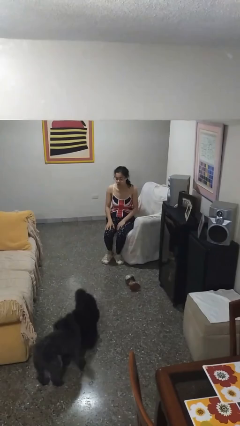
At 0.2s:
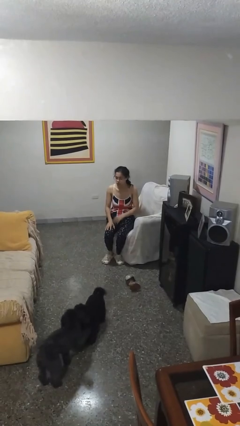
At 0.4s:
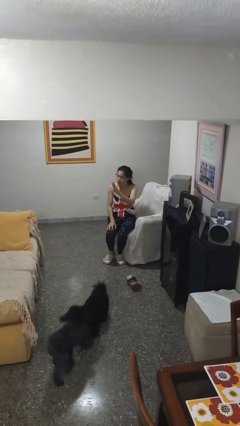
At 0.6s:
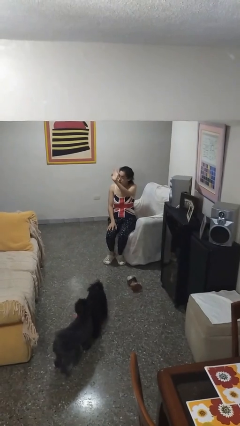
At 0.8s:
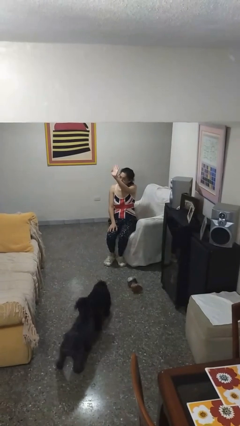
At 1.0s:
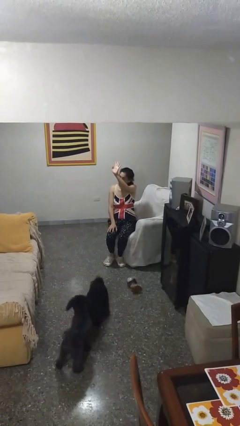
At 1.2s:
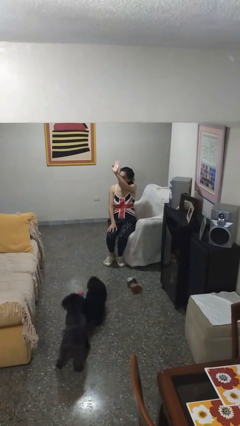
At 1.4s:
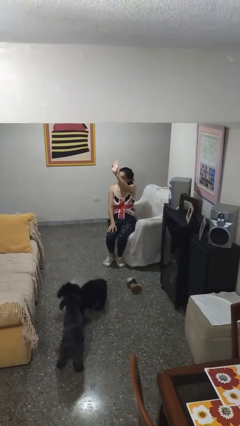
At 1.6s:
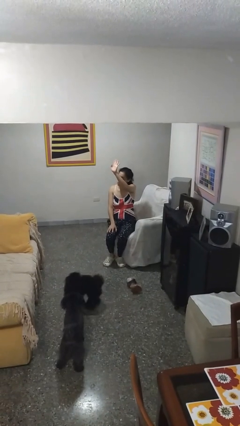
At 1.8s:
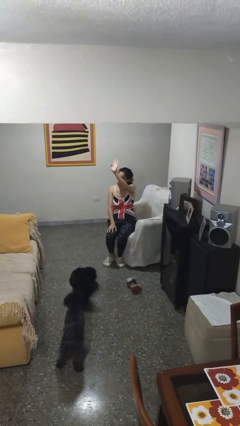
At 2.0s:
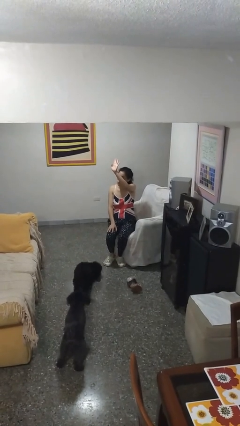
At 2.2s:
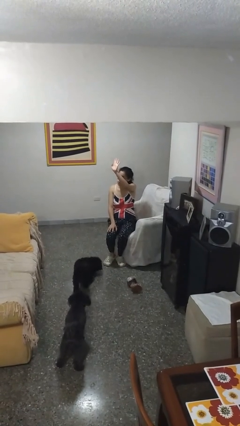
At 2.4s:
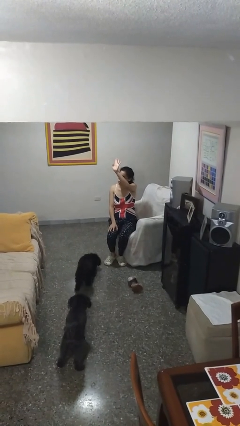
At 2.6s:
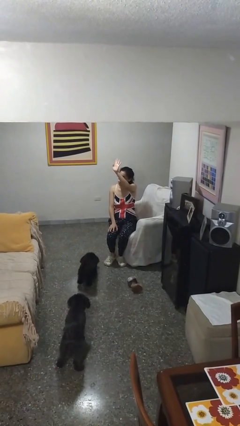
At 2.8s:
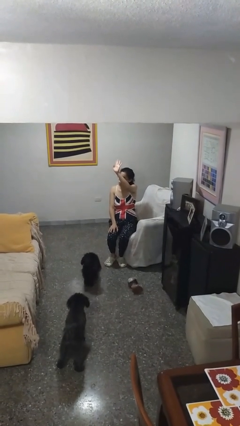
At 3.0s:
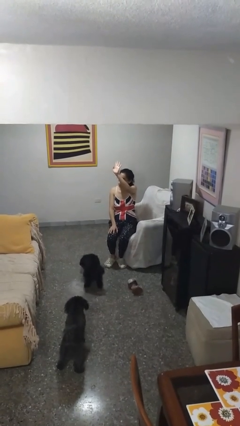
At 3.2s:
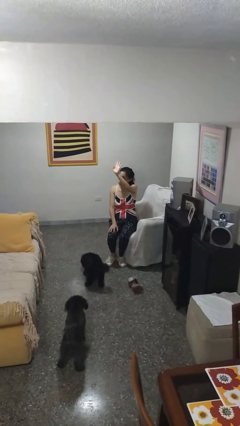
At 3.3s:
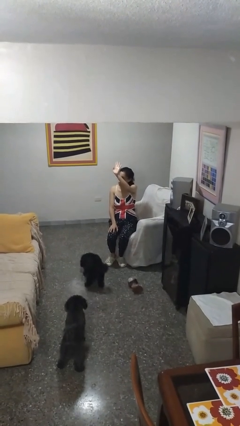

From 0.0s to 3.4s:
person gestures raise hand

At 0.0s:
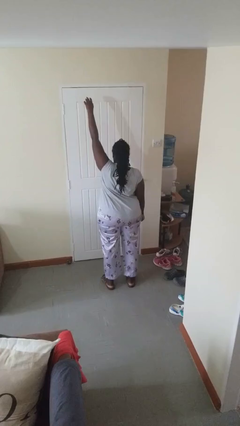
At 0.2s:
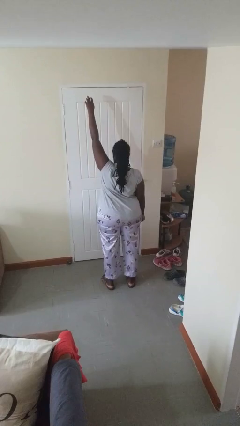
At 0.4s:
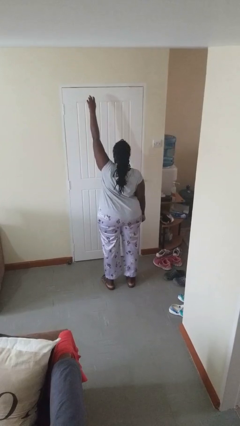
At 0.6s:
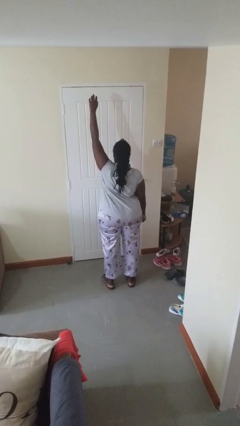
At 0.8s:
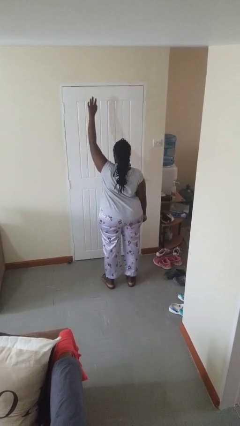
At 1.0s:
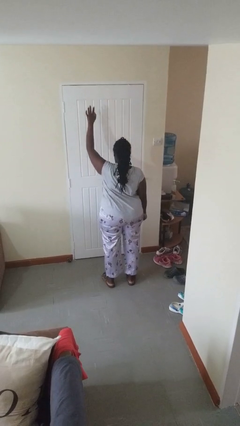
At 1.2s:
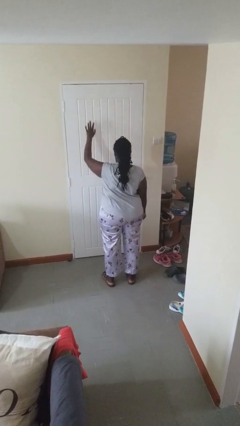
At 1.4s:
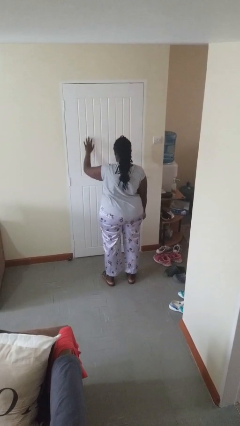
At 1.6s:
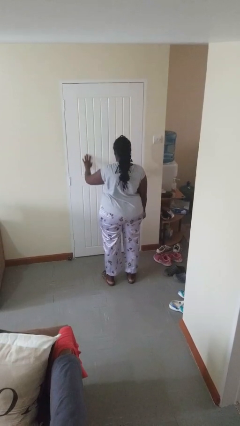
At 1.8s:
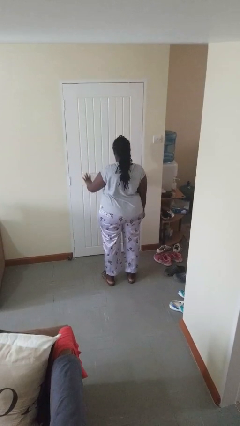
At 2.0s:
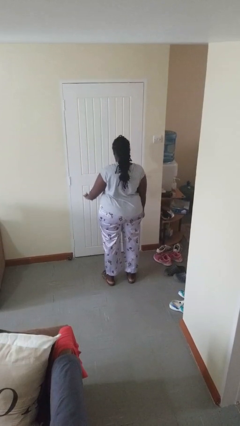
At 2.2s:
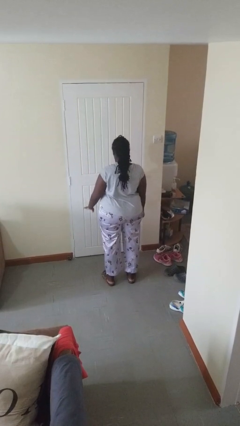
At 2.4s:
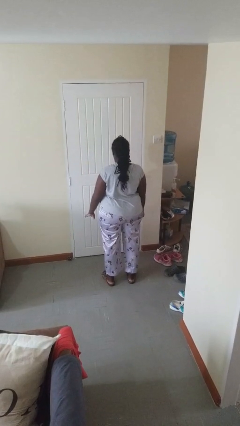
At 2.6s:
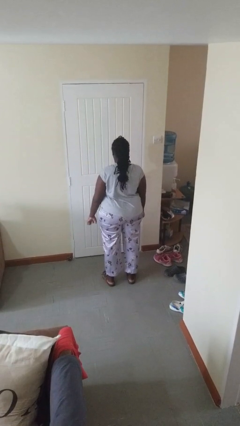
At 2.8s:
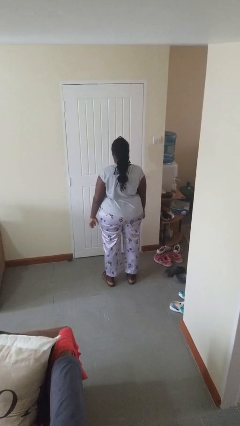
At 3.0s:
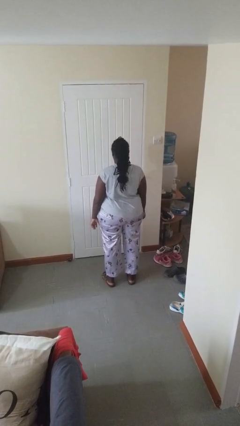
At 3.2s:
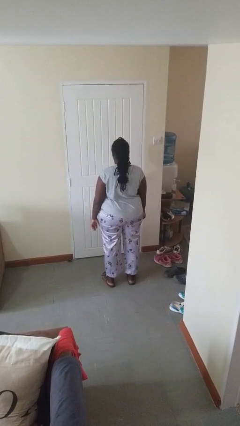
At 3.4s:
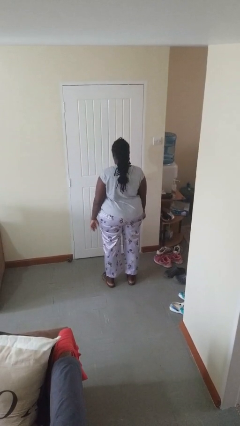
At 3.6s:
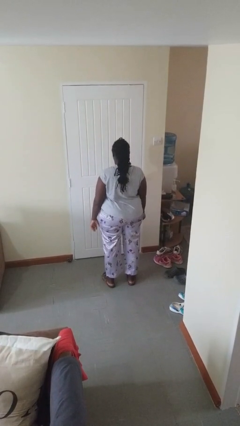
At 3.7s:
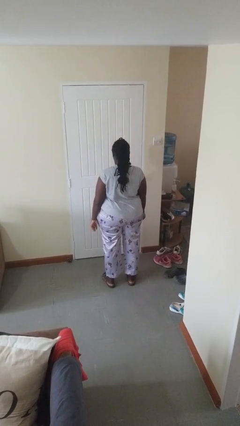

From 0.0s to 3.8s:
person gestures swipe down

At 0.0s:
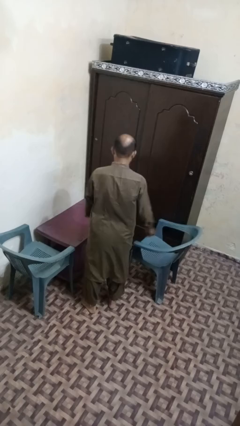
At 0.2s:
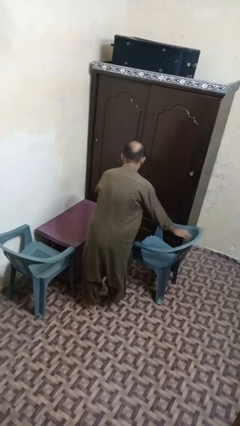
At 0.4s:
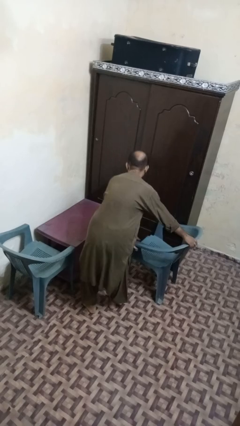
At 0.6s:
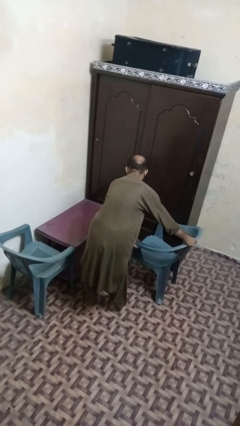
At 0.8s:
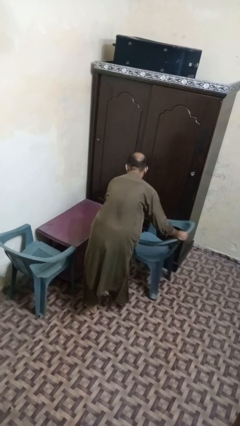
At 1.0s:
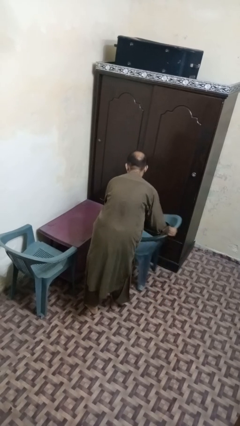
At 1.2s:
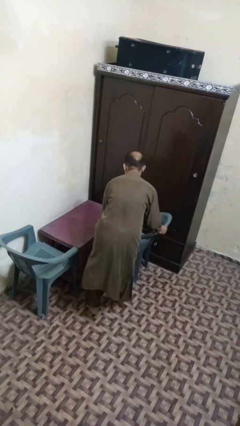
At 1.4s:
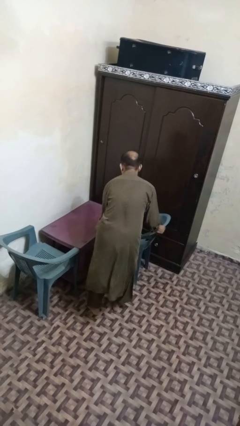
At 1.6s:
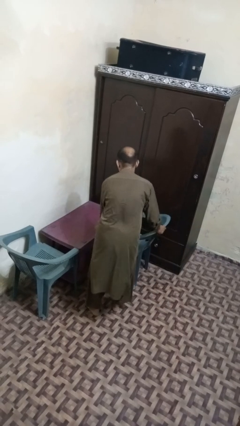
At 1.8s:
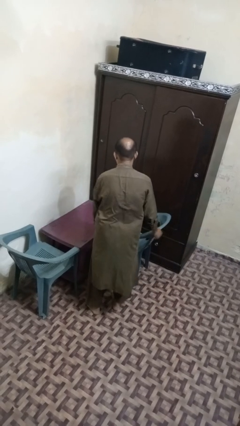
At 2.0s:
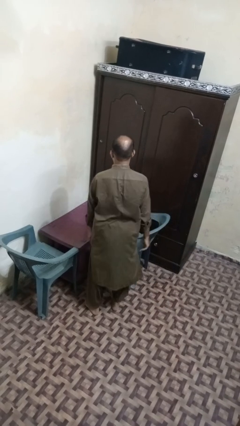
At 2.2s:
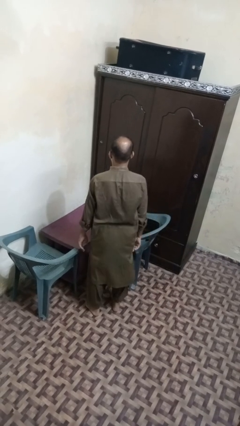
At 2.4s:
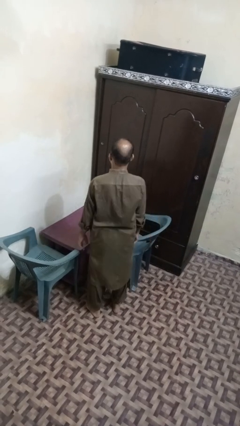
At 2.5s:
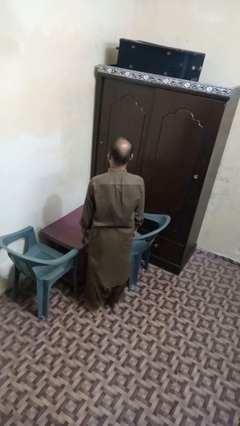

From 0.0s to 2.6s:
person pushes in chair

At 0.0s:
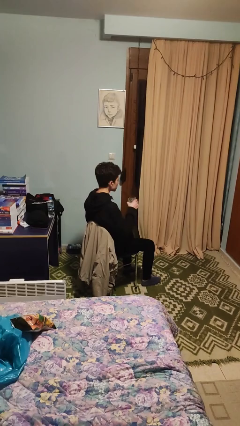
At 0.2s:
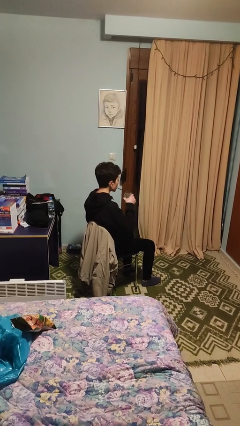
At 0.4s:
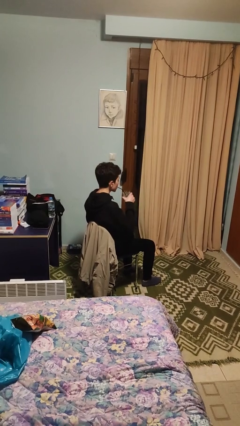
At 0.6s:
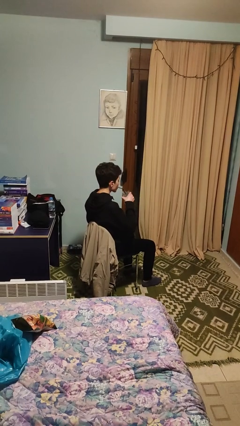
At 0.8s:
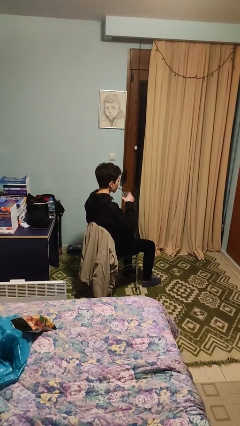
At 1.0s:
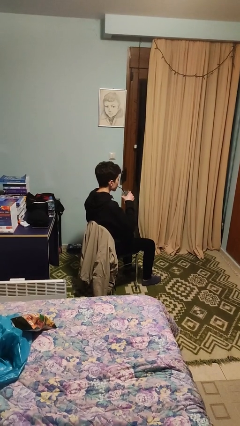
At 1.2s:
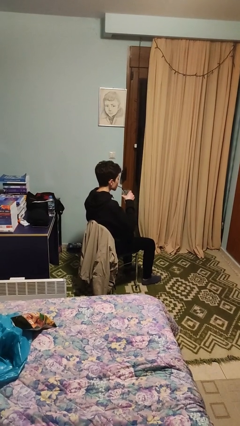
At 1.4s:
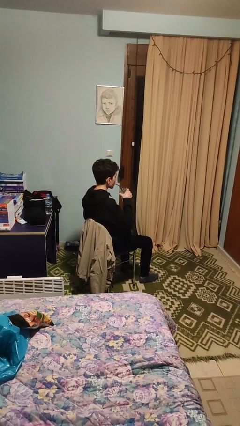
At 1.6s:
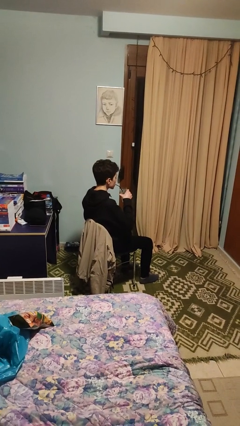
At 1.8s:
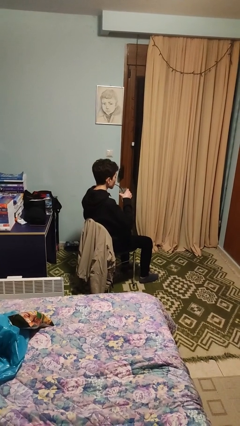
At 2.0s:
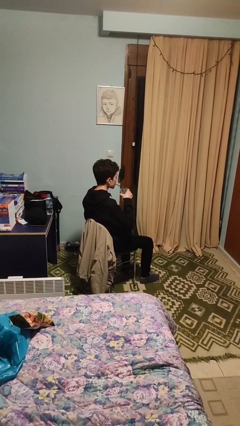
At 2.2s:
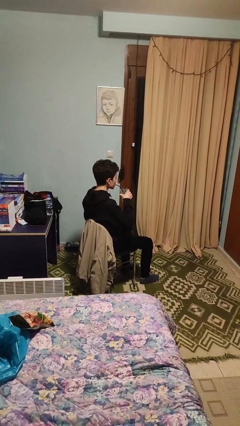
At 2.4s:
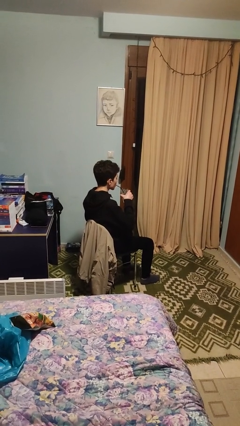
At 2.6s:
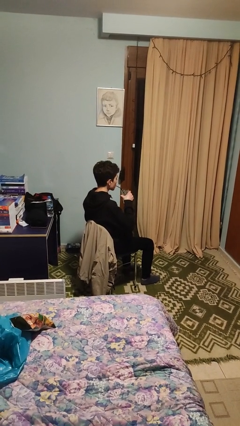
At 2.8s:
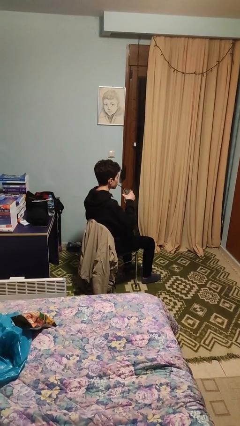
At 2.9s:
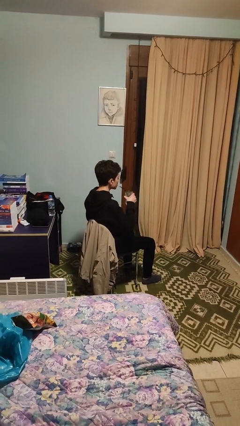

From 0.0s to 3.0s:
person drinks from straw

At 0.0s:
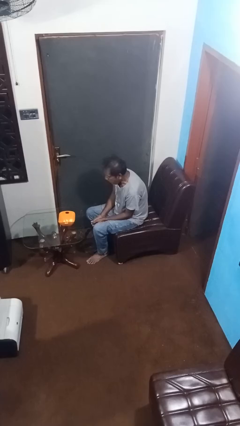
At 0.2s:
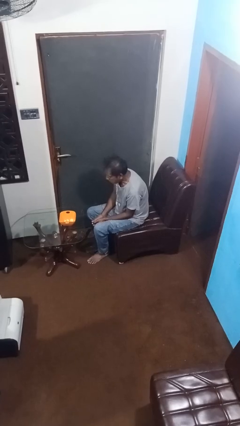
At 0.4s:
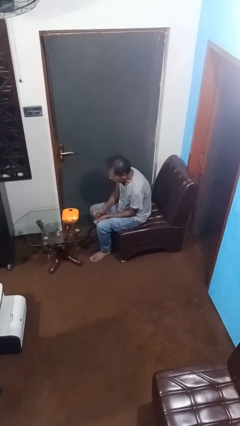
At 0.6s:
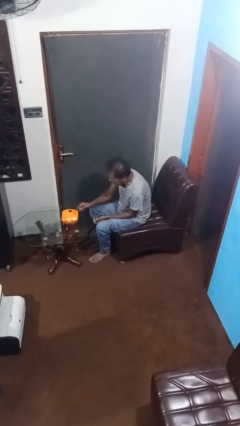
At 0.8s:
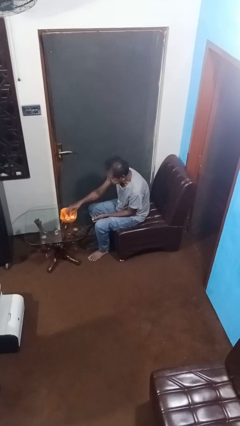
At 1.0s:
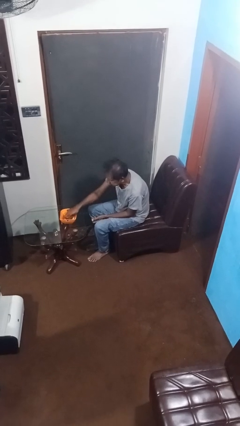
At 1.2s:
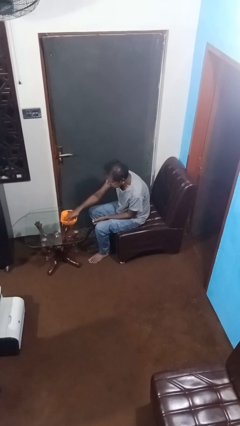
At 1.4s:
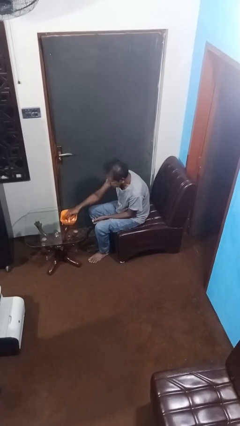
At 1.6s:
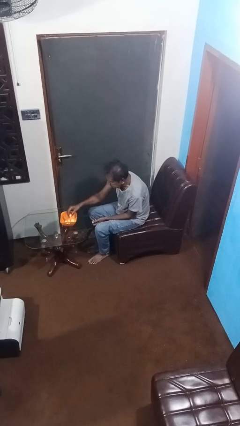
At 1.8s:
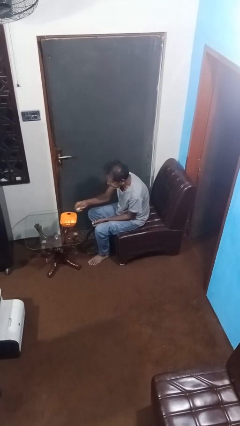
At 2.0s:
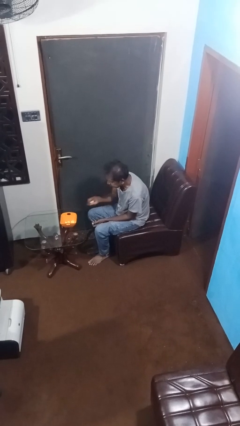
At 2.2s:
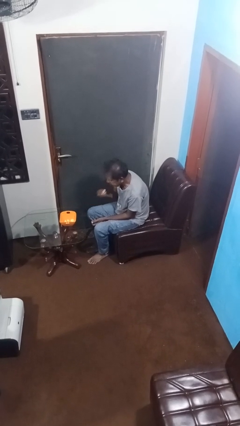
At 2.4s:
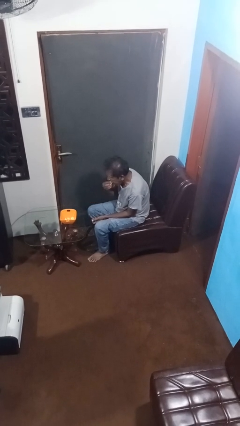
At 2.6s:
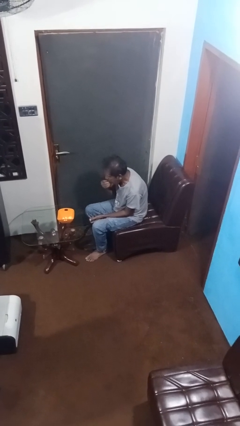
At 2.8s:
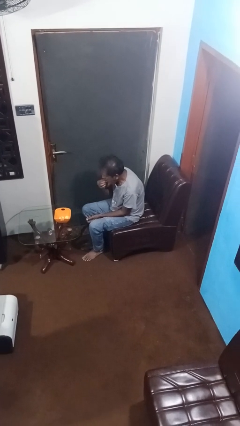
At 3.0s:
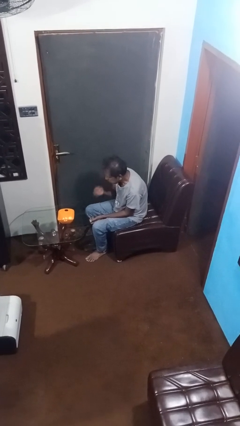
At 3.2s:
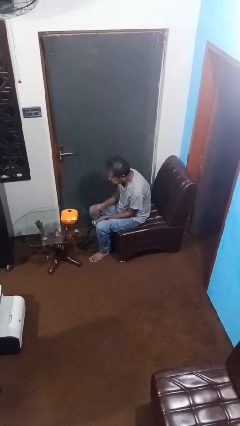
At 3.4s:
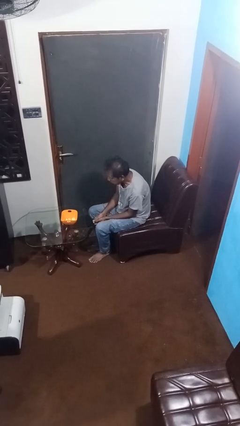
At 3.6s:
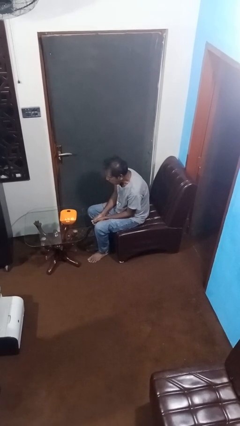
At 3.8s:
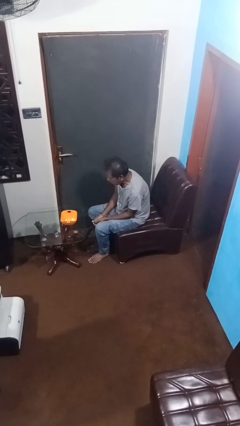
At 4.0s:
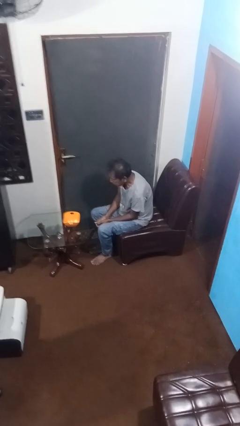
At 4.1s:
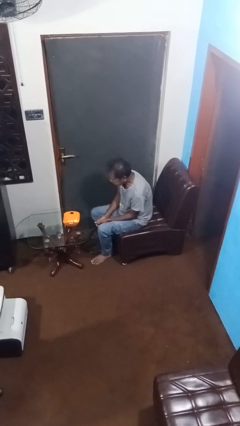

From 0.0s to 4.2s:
person eats with hands

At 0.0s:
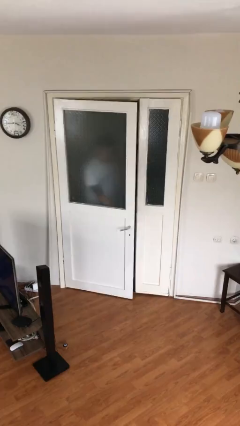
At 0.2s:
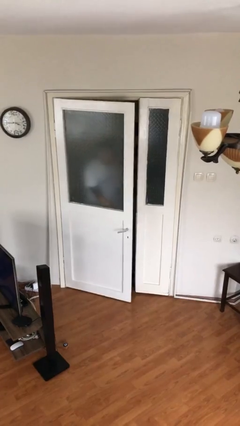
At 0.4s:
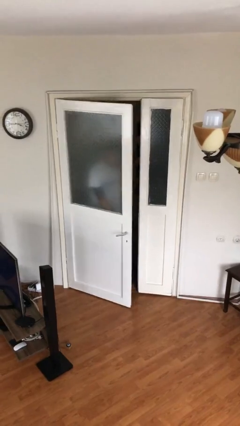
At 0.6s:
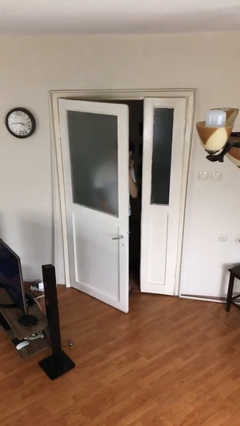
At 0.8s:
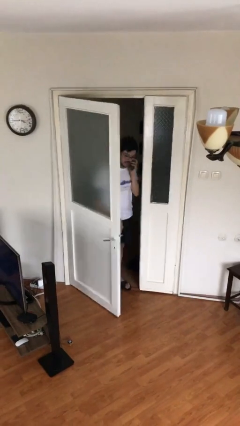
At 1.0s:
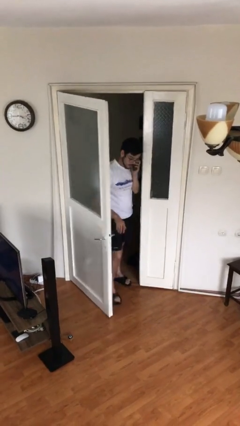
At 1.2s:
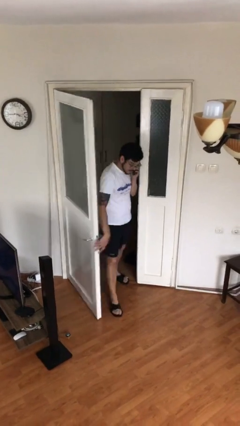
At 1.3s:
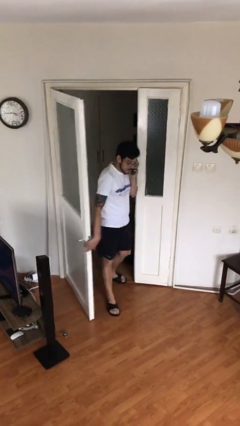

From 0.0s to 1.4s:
person opens facility door
